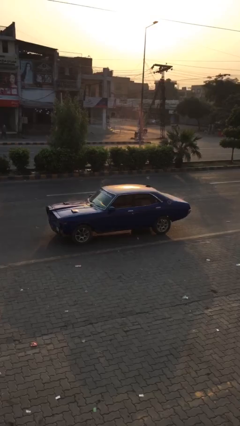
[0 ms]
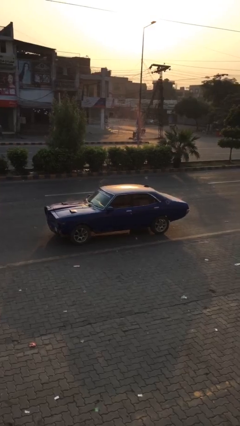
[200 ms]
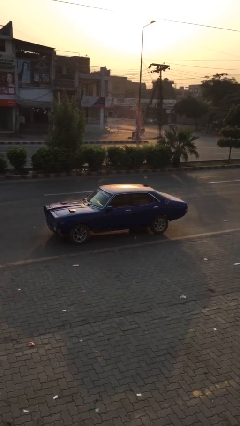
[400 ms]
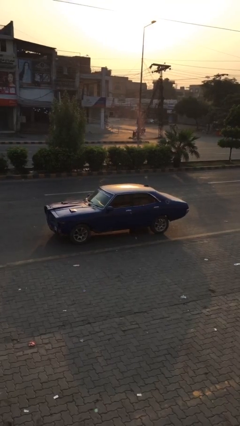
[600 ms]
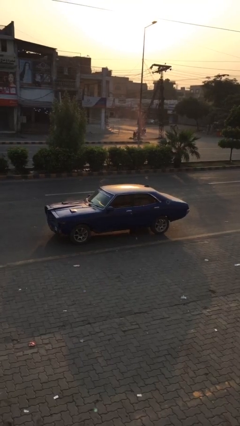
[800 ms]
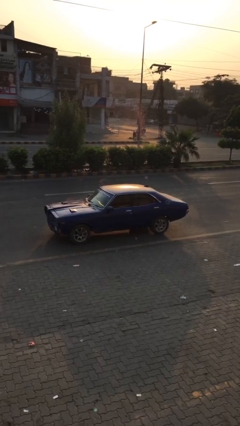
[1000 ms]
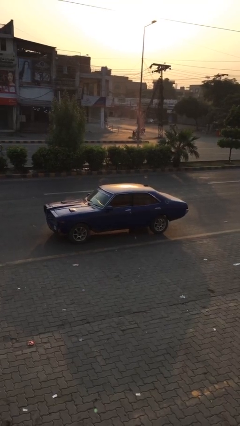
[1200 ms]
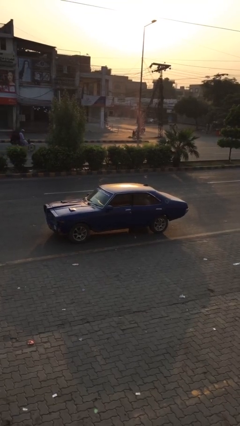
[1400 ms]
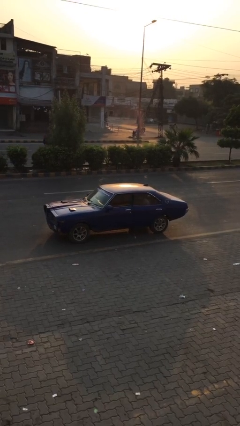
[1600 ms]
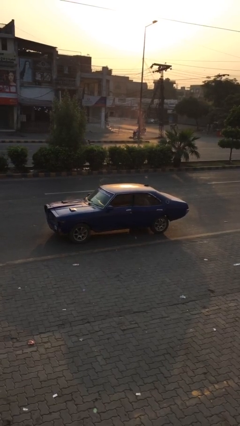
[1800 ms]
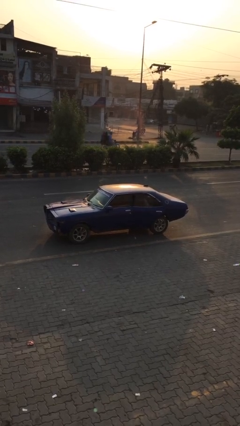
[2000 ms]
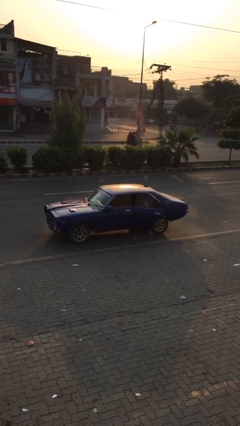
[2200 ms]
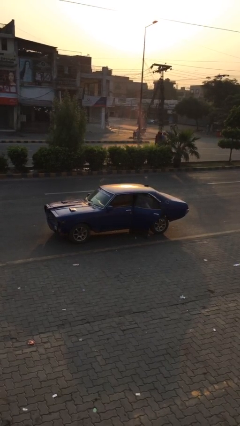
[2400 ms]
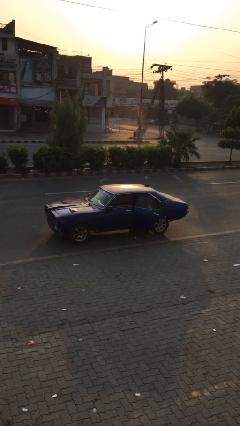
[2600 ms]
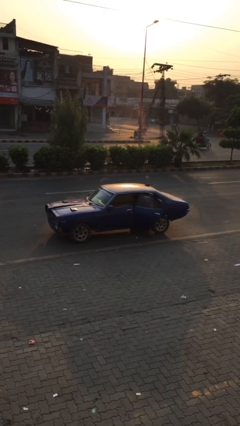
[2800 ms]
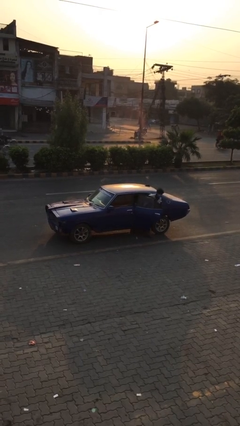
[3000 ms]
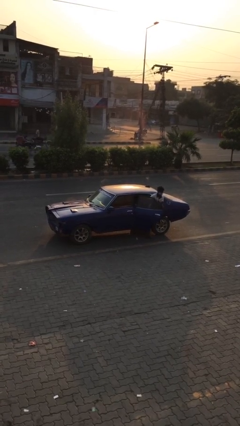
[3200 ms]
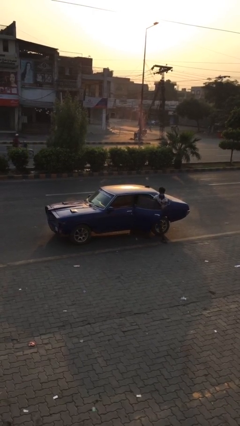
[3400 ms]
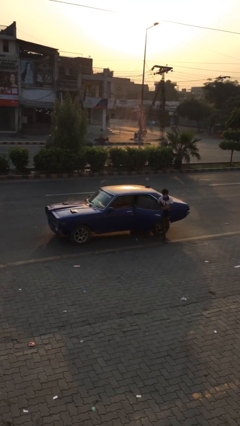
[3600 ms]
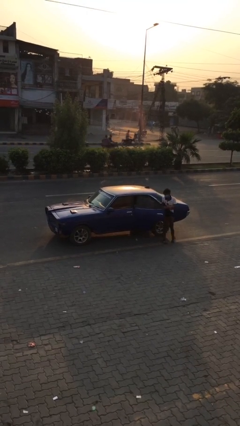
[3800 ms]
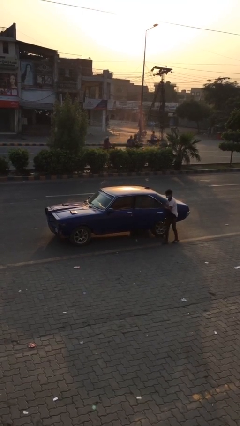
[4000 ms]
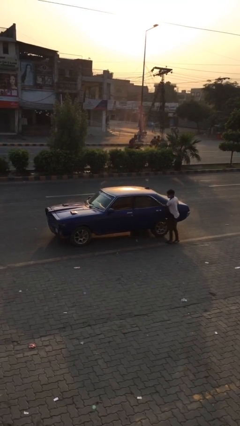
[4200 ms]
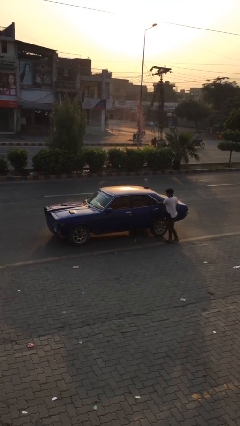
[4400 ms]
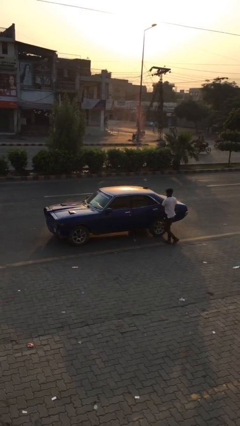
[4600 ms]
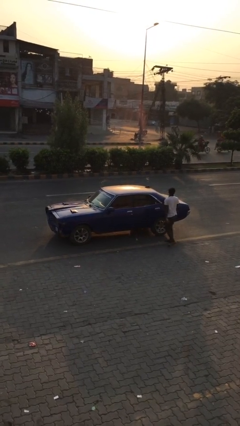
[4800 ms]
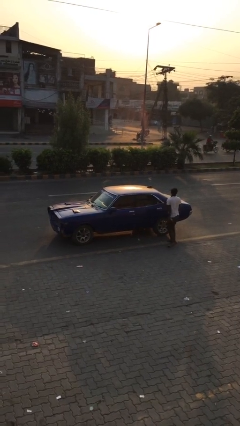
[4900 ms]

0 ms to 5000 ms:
car drops off person

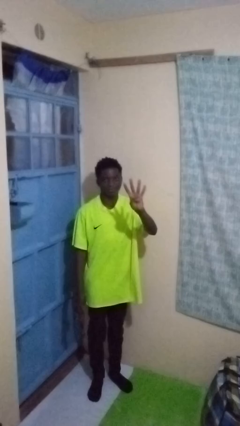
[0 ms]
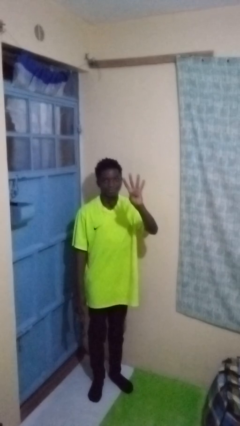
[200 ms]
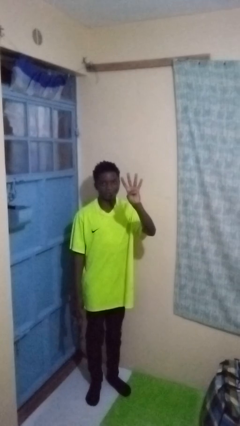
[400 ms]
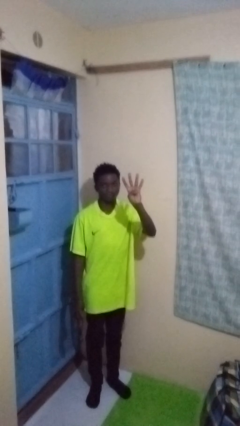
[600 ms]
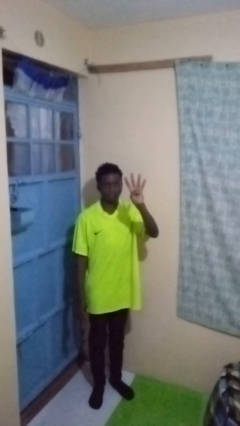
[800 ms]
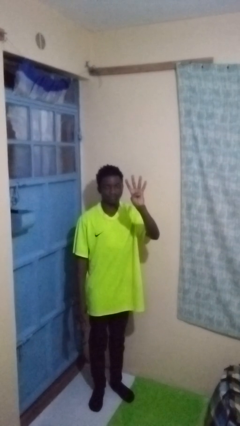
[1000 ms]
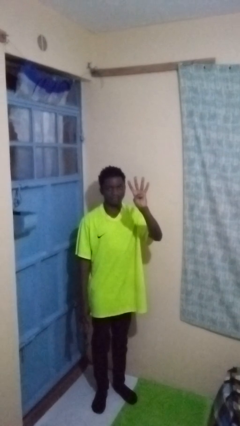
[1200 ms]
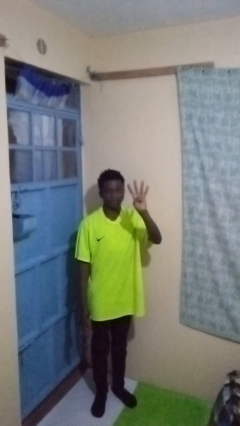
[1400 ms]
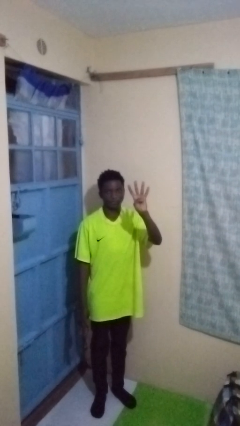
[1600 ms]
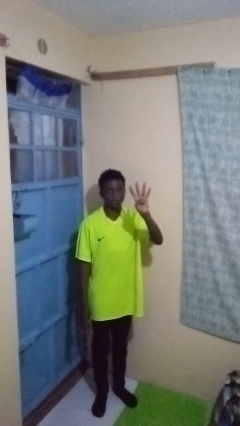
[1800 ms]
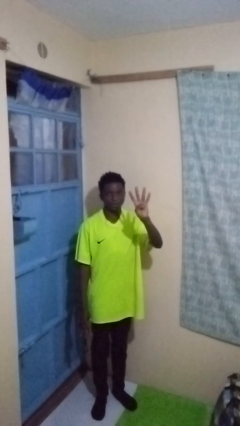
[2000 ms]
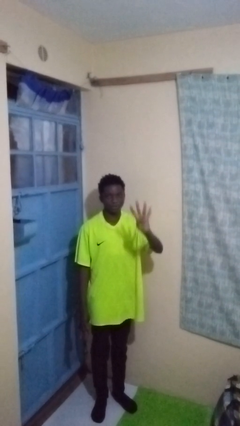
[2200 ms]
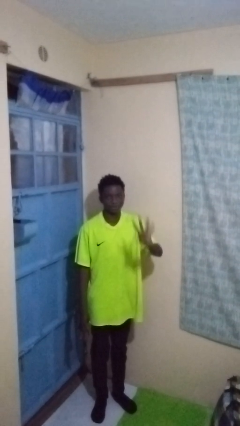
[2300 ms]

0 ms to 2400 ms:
person gestures number four

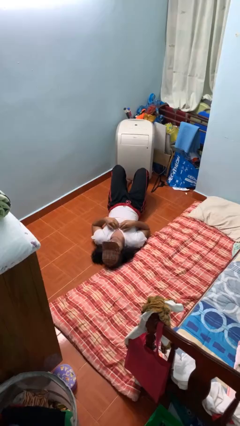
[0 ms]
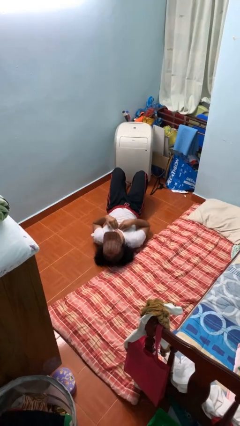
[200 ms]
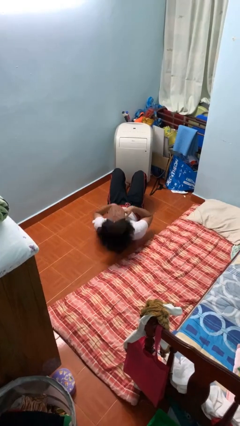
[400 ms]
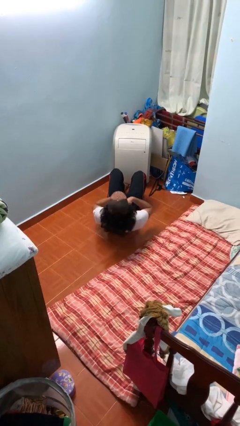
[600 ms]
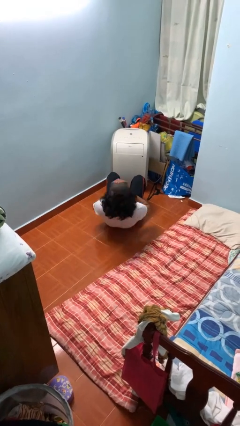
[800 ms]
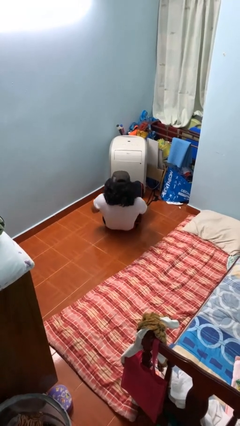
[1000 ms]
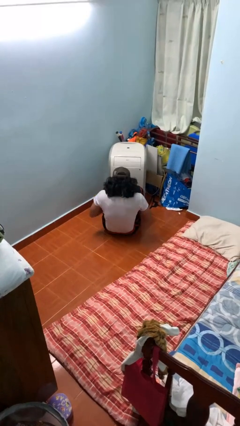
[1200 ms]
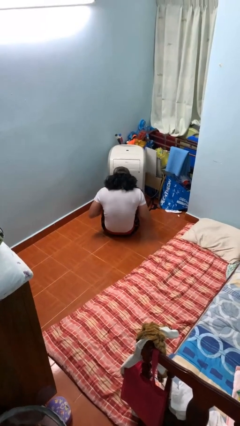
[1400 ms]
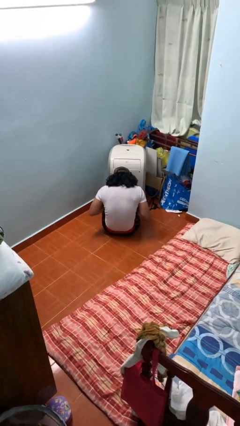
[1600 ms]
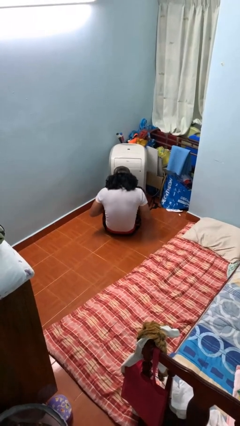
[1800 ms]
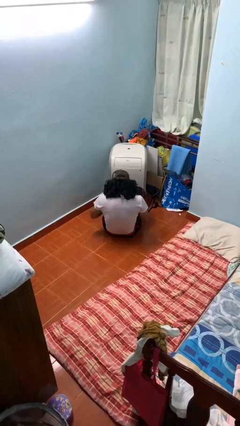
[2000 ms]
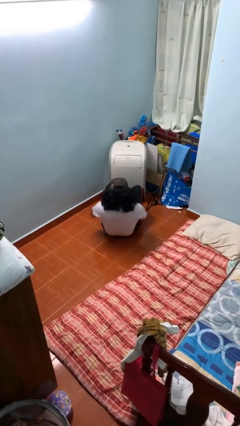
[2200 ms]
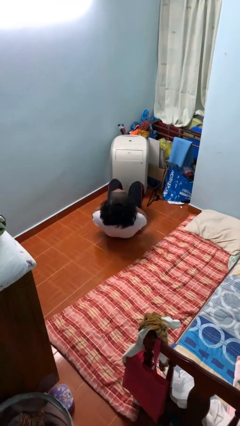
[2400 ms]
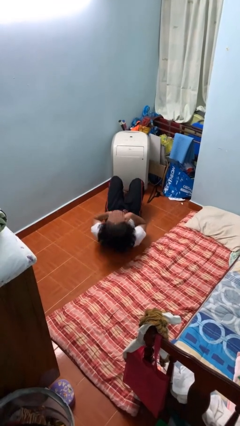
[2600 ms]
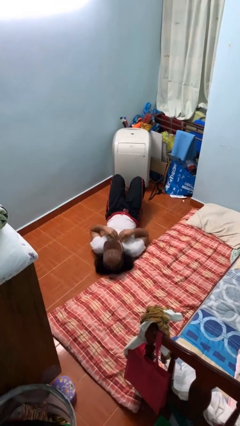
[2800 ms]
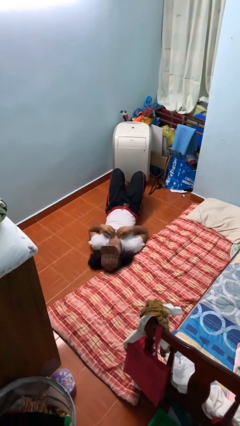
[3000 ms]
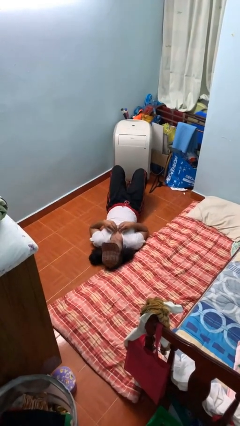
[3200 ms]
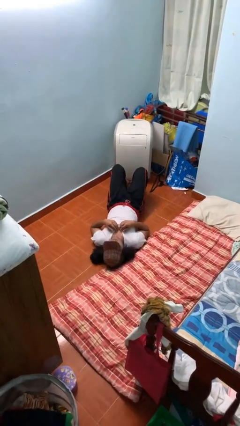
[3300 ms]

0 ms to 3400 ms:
person exercises with situp

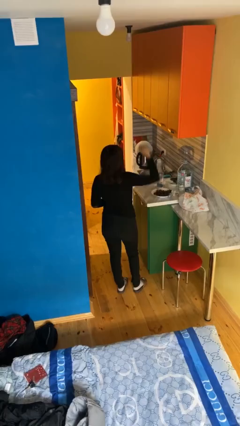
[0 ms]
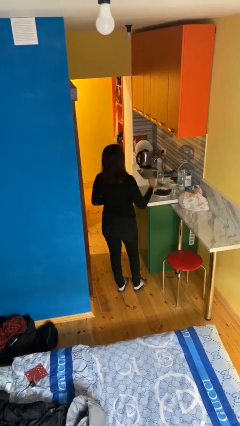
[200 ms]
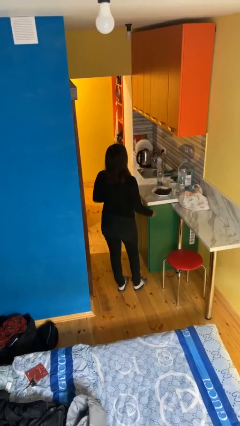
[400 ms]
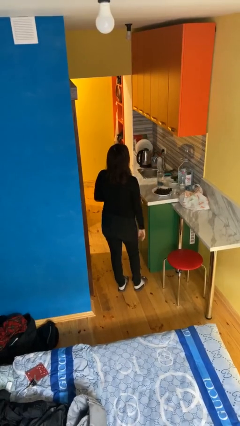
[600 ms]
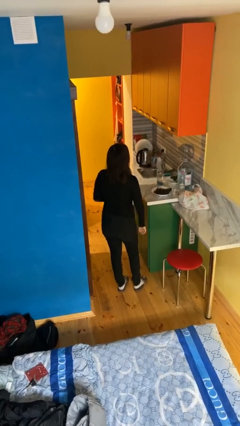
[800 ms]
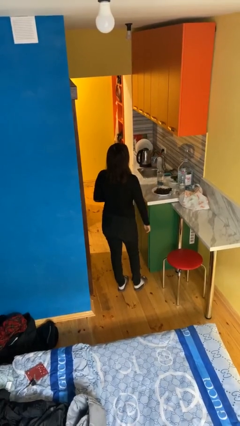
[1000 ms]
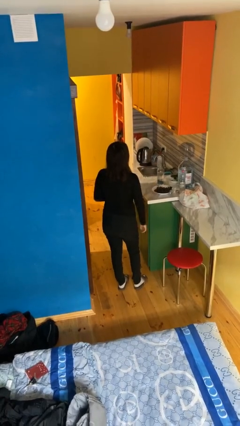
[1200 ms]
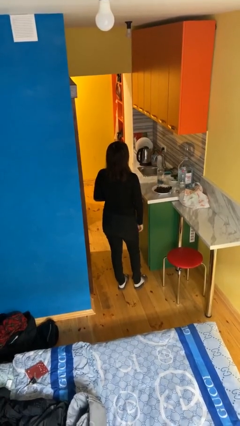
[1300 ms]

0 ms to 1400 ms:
person gestures lower hand

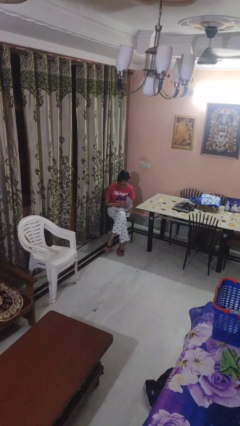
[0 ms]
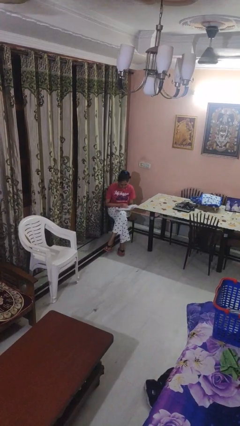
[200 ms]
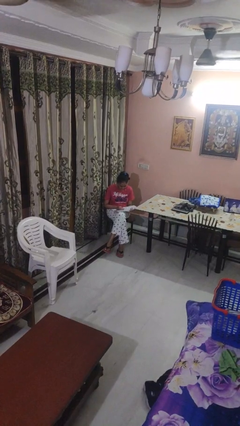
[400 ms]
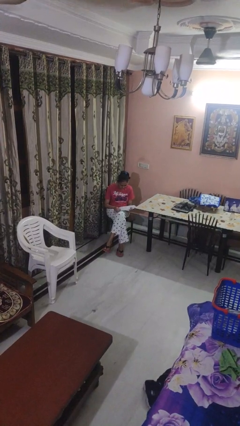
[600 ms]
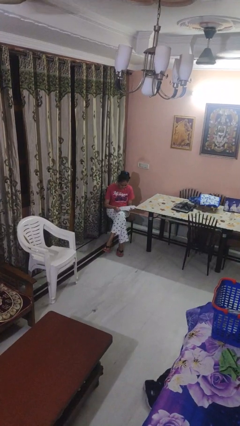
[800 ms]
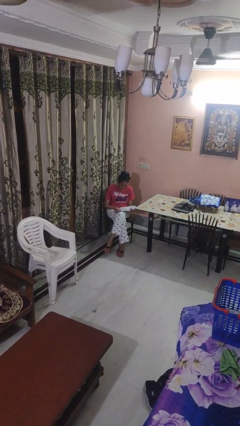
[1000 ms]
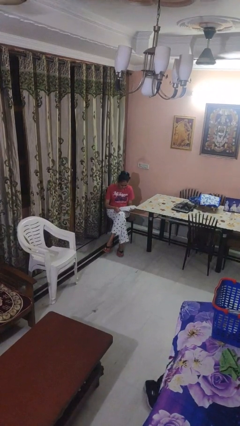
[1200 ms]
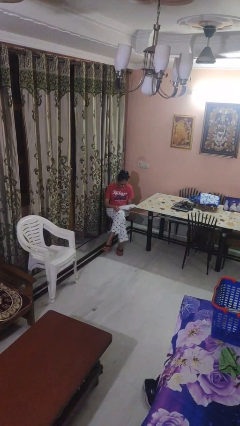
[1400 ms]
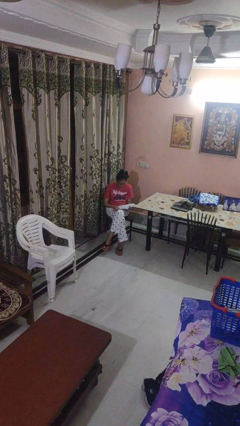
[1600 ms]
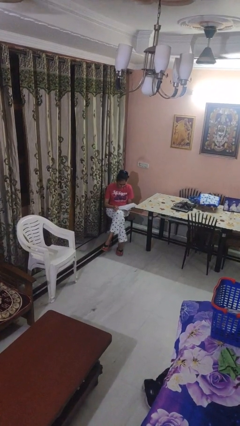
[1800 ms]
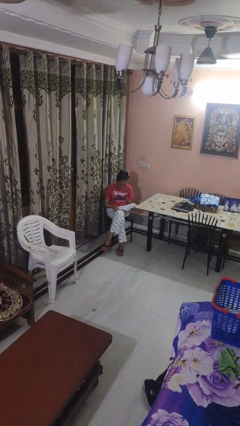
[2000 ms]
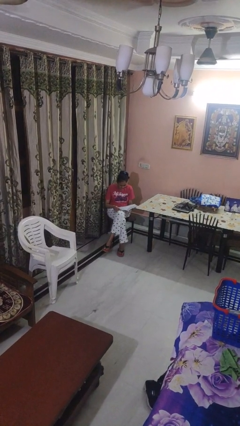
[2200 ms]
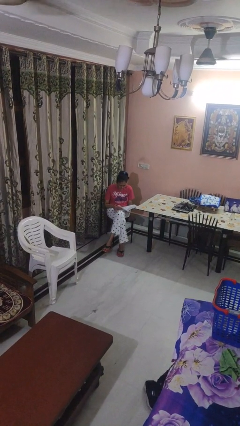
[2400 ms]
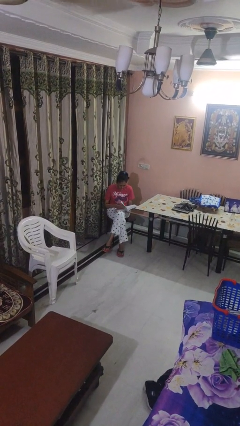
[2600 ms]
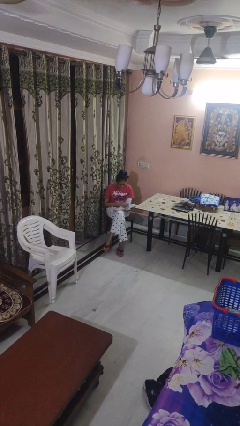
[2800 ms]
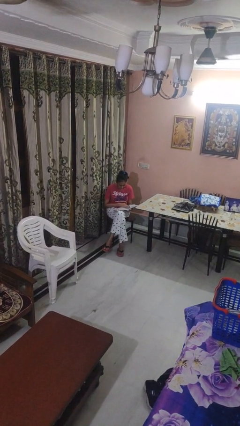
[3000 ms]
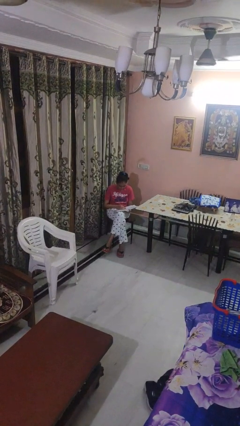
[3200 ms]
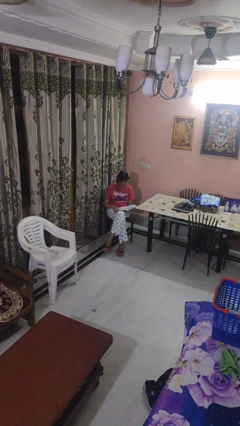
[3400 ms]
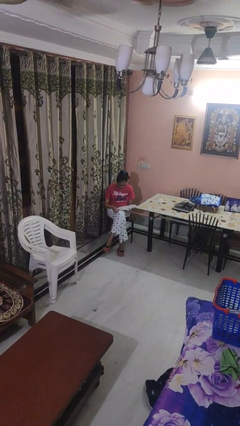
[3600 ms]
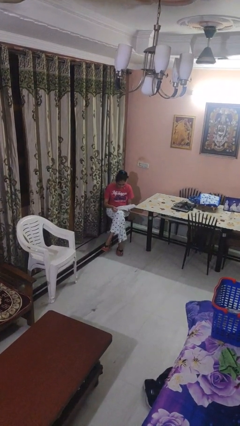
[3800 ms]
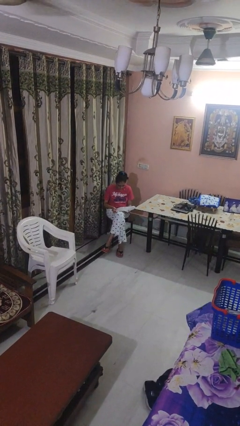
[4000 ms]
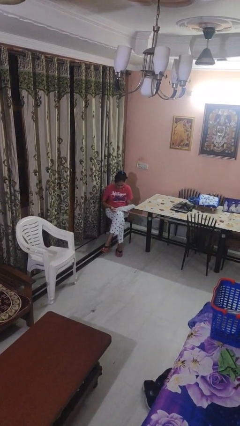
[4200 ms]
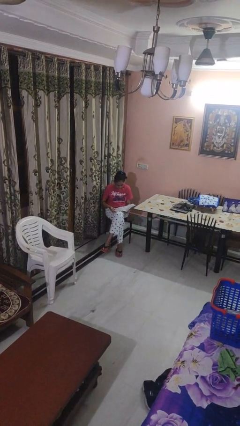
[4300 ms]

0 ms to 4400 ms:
person reads magazine

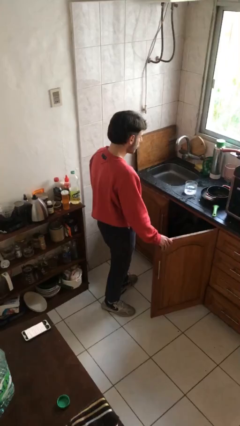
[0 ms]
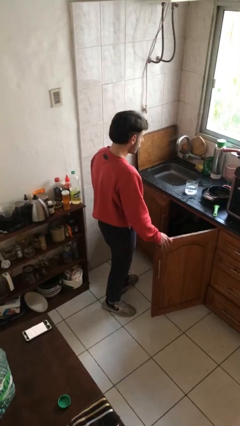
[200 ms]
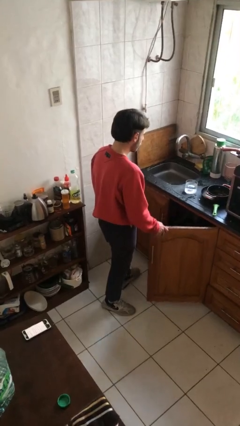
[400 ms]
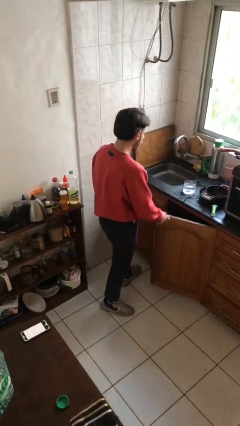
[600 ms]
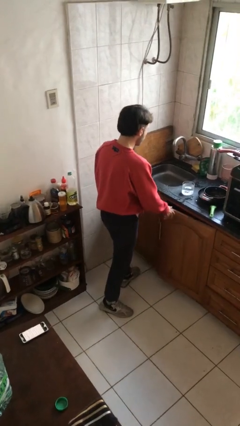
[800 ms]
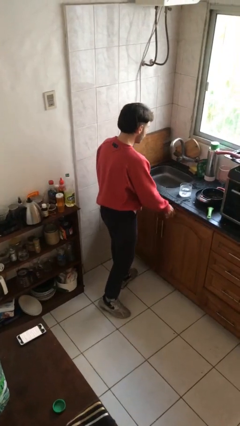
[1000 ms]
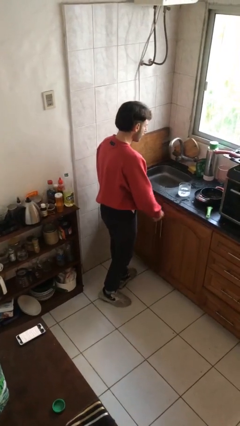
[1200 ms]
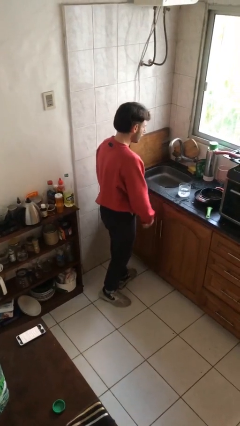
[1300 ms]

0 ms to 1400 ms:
person closes cabinet
